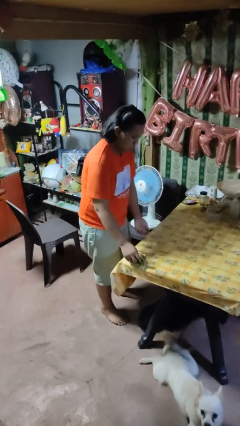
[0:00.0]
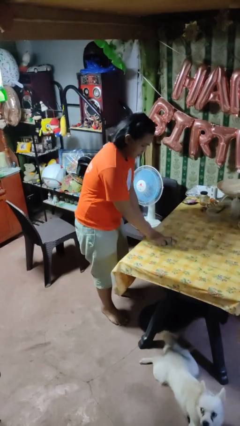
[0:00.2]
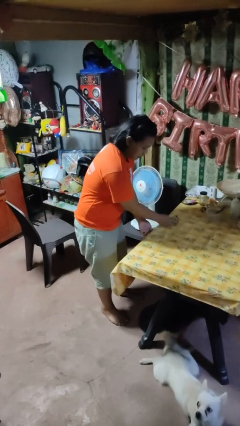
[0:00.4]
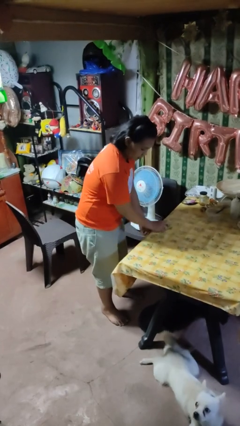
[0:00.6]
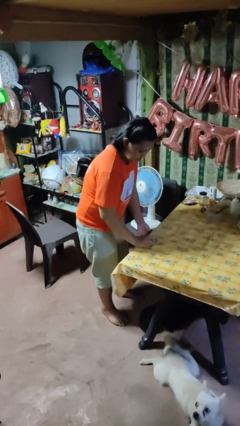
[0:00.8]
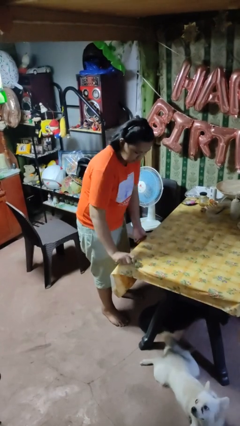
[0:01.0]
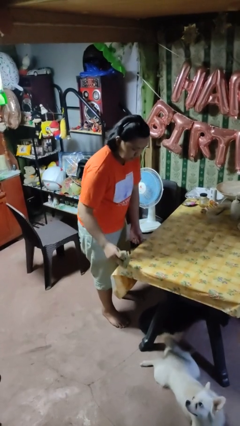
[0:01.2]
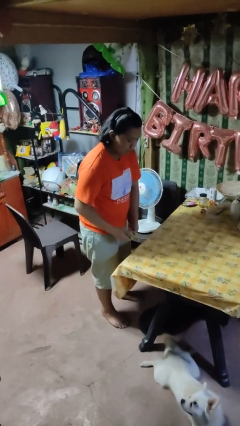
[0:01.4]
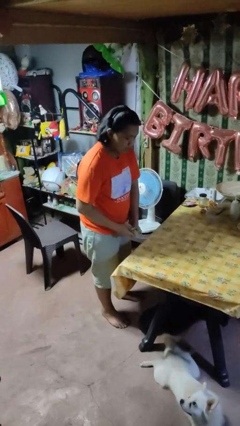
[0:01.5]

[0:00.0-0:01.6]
person cleans table with rag

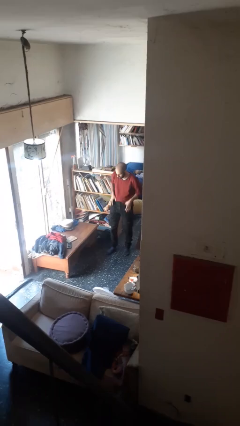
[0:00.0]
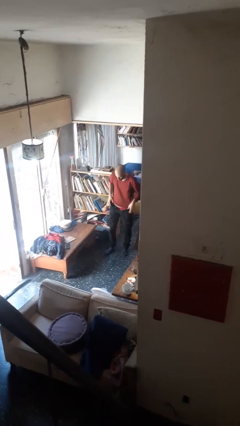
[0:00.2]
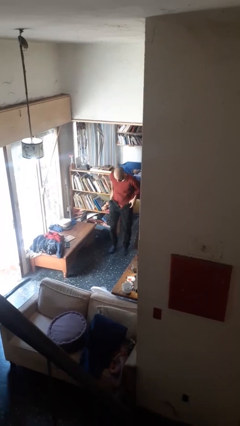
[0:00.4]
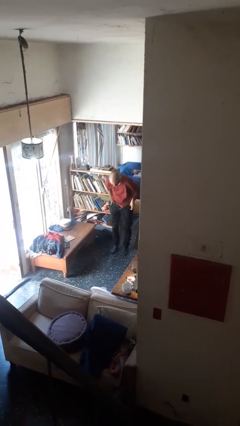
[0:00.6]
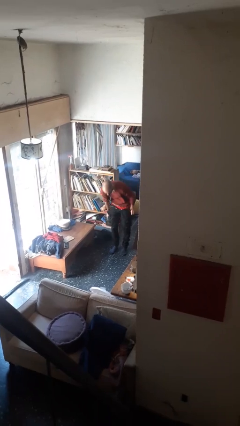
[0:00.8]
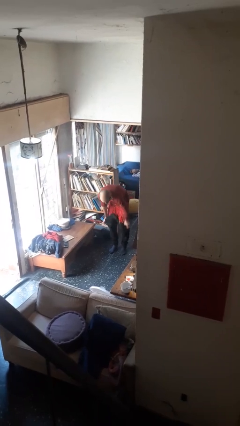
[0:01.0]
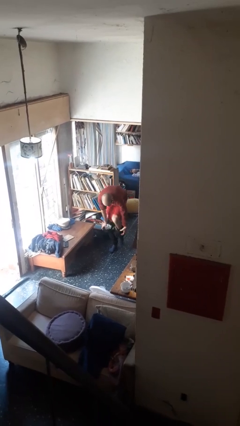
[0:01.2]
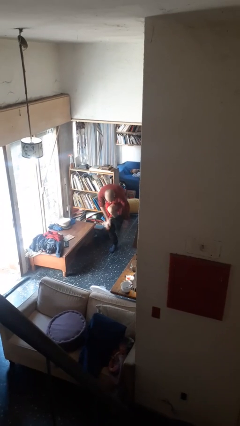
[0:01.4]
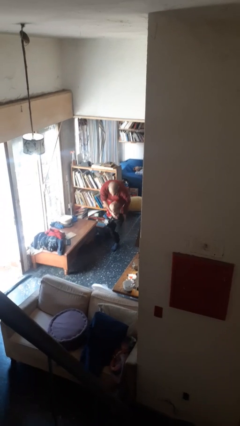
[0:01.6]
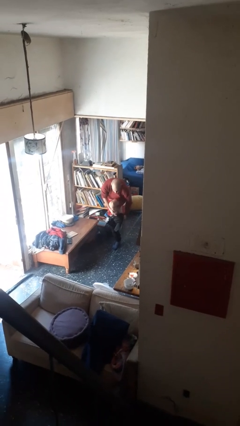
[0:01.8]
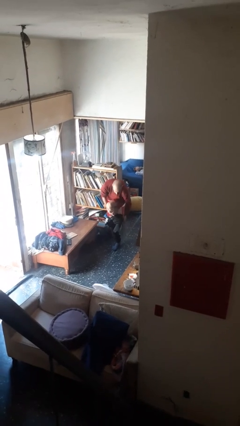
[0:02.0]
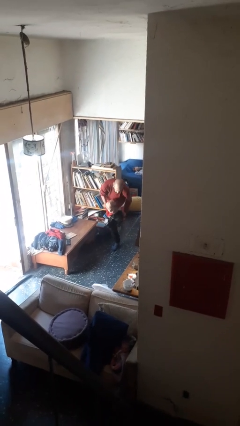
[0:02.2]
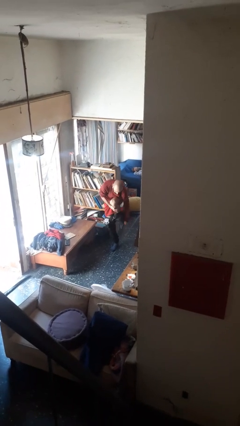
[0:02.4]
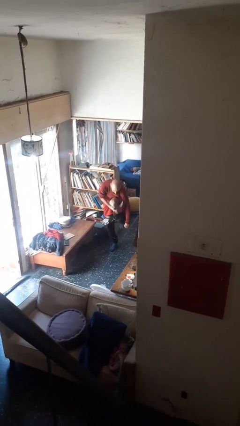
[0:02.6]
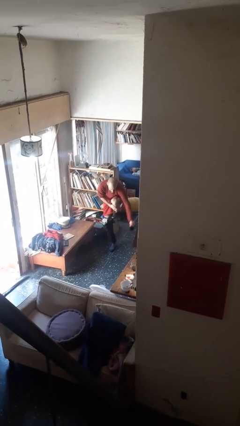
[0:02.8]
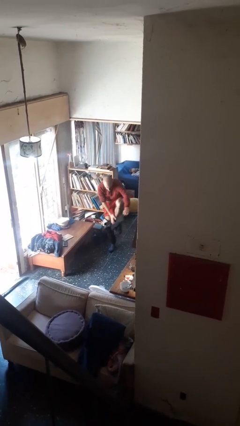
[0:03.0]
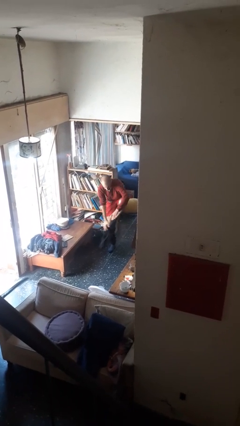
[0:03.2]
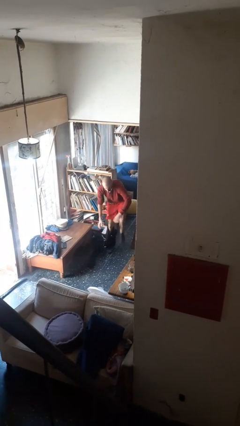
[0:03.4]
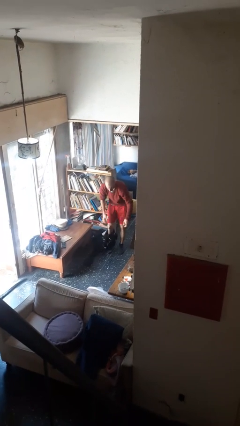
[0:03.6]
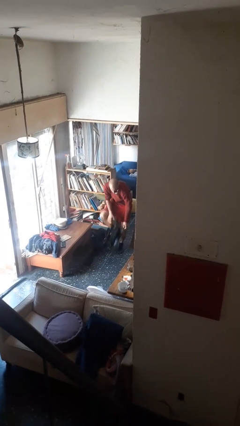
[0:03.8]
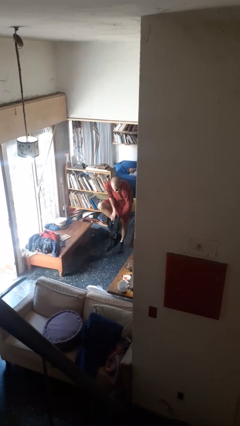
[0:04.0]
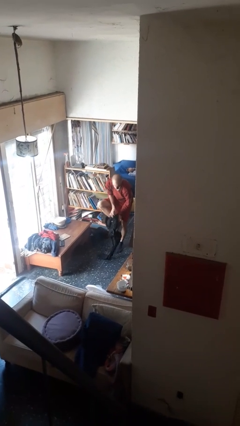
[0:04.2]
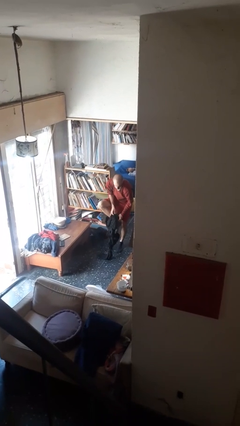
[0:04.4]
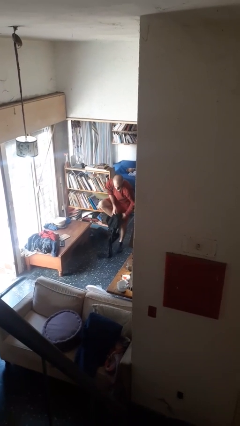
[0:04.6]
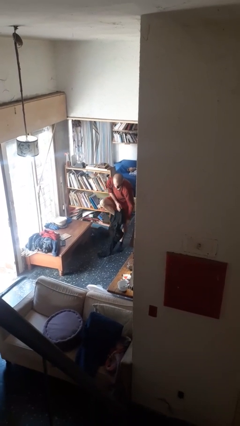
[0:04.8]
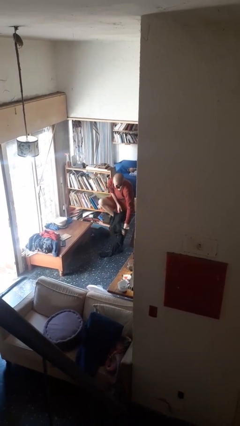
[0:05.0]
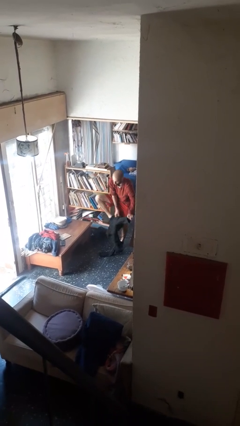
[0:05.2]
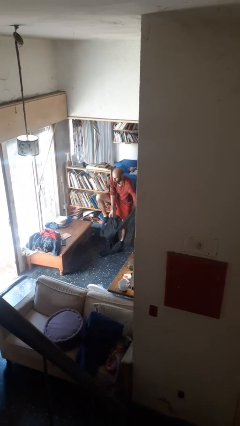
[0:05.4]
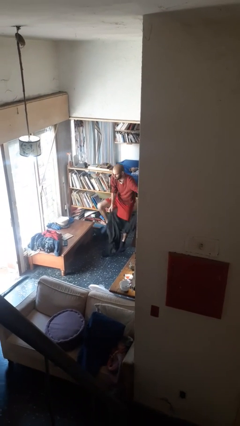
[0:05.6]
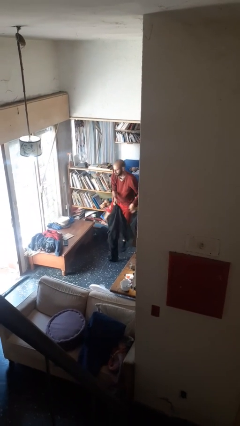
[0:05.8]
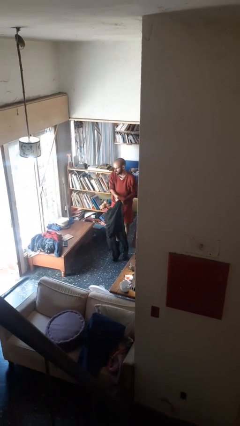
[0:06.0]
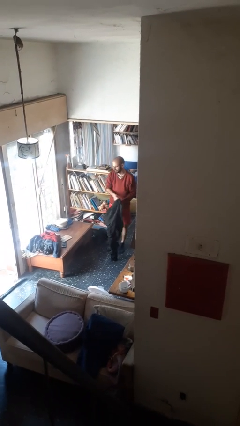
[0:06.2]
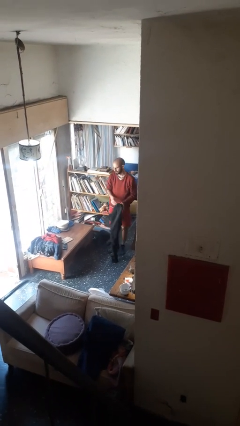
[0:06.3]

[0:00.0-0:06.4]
person takes off pants

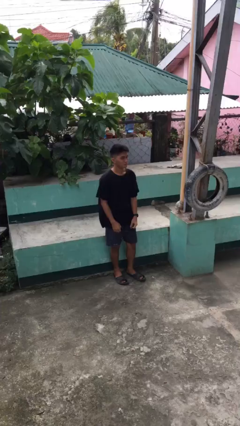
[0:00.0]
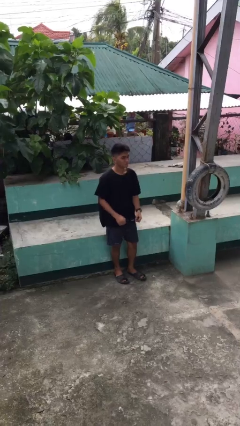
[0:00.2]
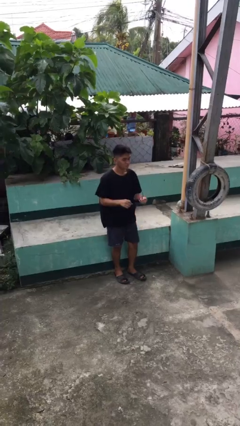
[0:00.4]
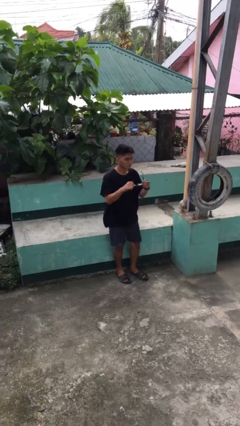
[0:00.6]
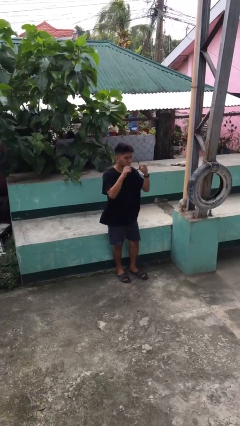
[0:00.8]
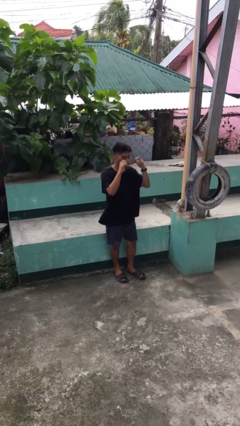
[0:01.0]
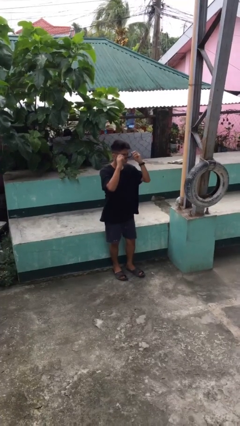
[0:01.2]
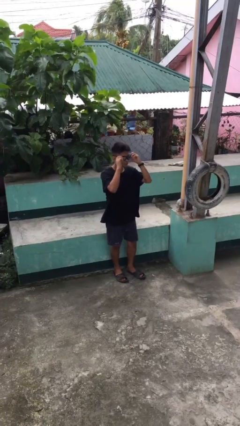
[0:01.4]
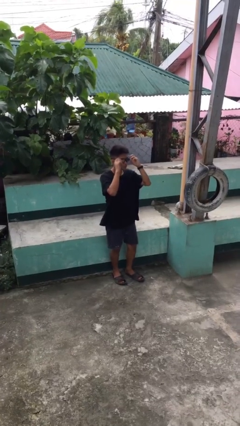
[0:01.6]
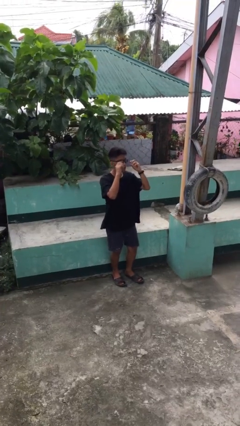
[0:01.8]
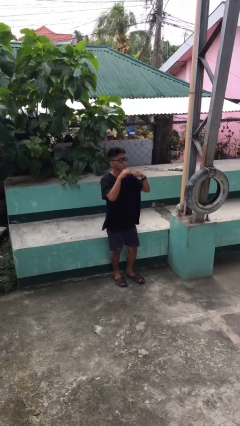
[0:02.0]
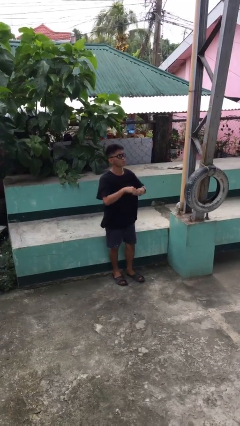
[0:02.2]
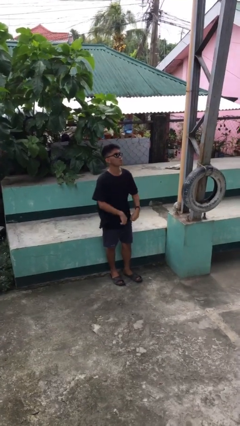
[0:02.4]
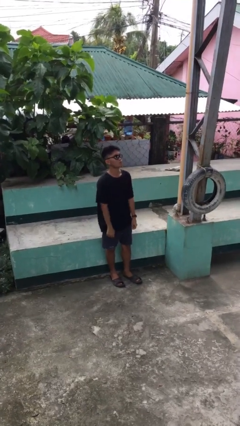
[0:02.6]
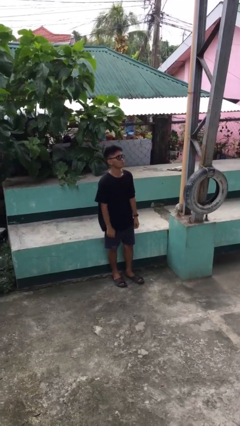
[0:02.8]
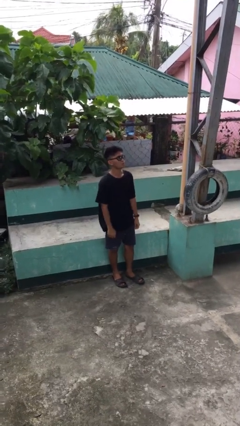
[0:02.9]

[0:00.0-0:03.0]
person puts on sunglasses

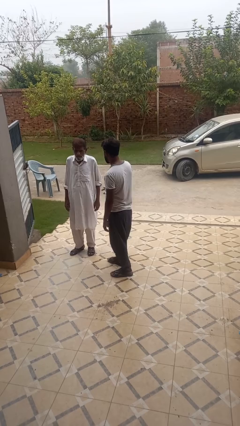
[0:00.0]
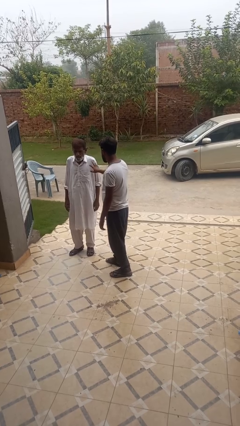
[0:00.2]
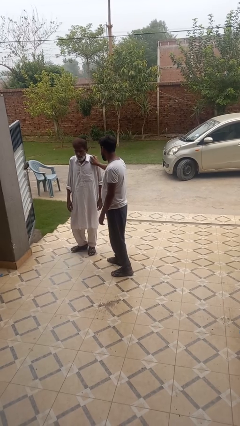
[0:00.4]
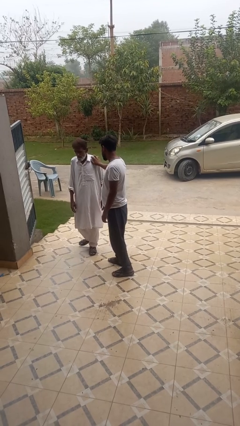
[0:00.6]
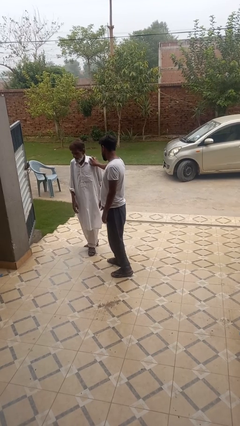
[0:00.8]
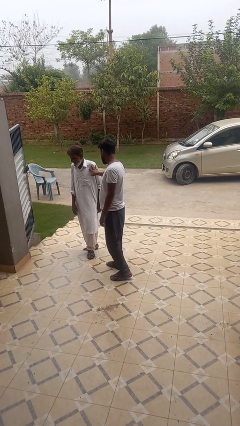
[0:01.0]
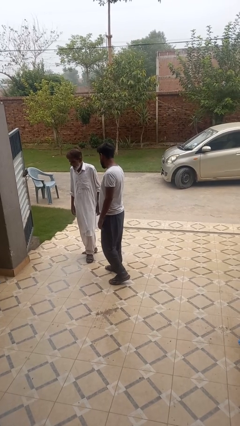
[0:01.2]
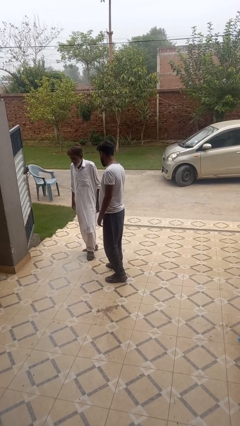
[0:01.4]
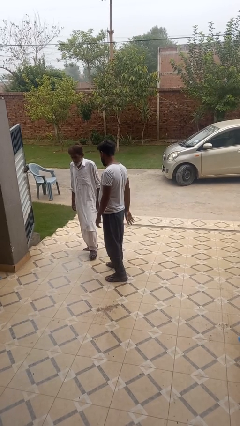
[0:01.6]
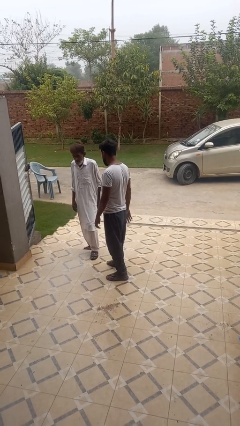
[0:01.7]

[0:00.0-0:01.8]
person shoves person

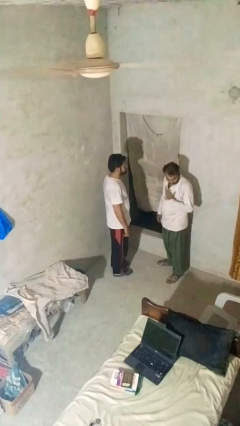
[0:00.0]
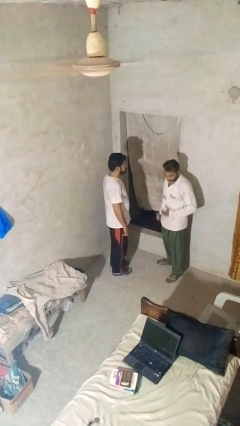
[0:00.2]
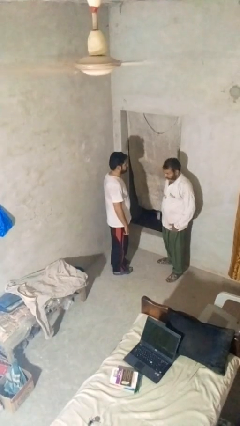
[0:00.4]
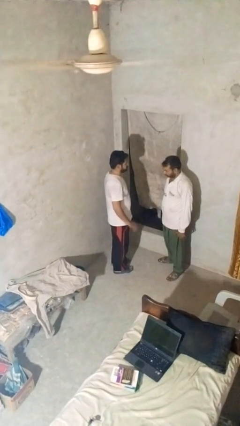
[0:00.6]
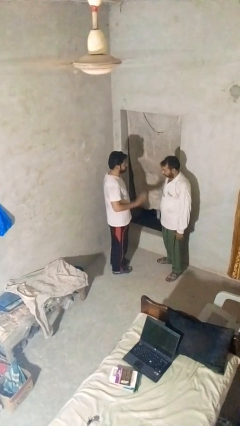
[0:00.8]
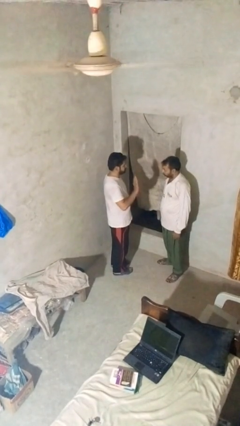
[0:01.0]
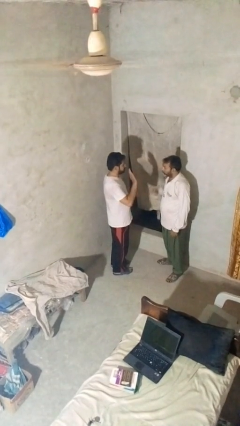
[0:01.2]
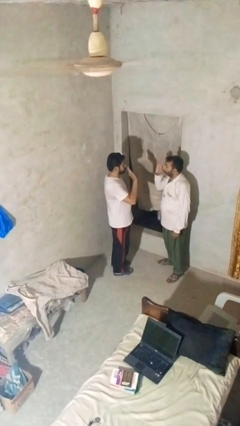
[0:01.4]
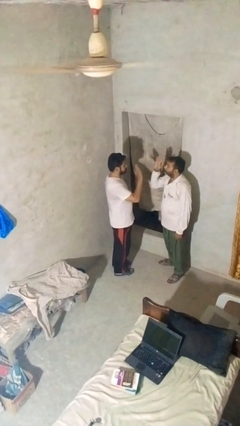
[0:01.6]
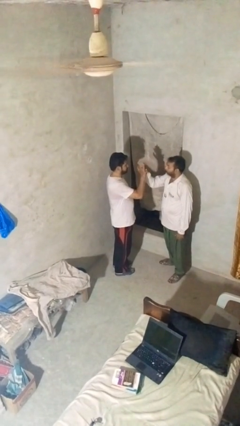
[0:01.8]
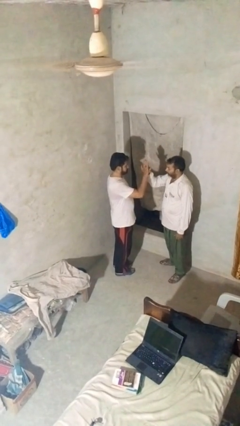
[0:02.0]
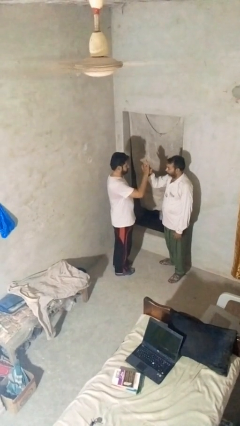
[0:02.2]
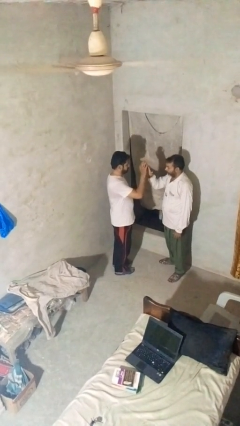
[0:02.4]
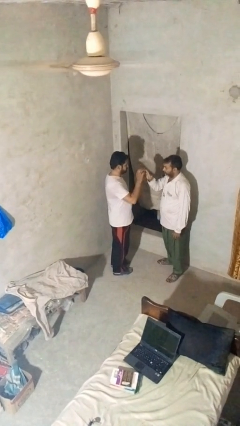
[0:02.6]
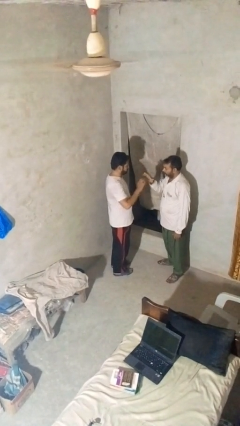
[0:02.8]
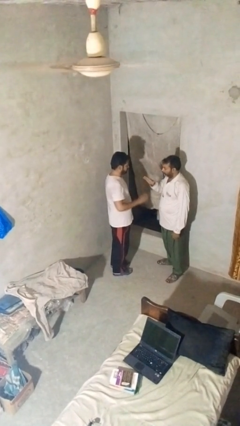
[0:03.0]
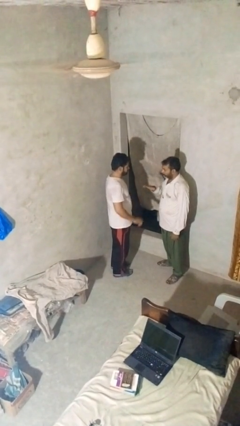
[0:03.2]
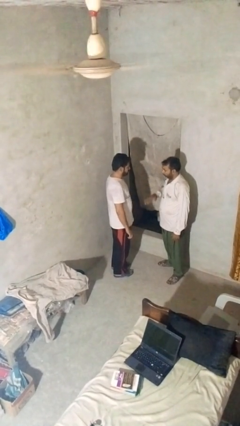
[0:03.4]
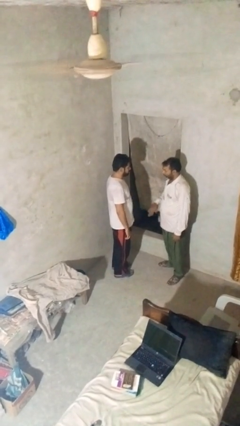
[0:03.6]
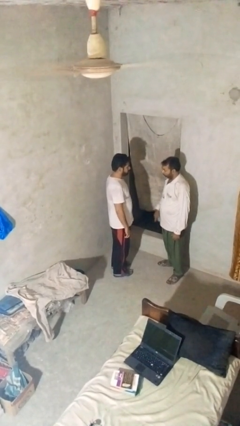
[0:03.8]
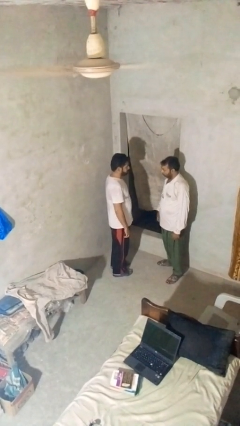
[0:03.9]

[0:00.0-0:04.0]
person highfives hand

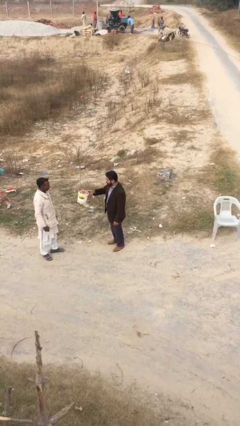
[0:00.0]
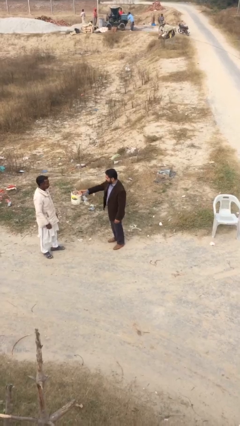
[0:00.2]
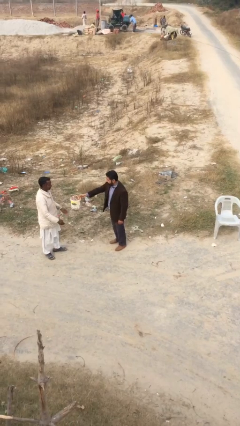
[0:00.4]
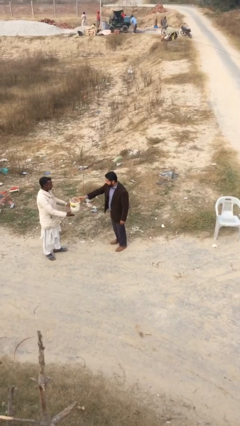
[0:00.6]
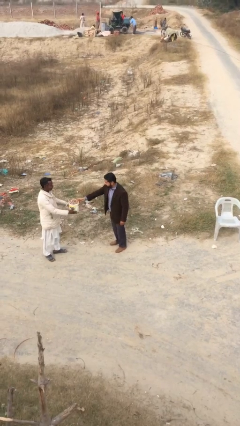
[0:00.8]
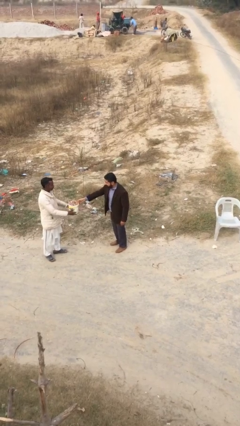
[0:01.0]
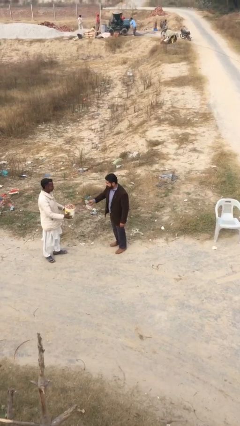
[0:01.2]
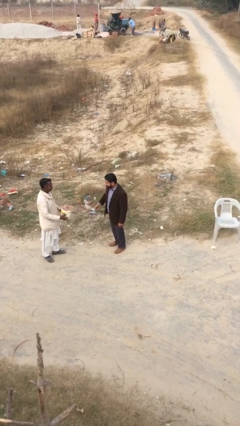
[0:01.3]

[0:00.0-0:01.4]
person transfers object to person
